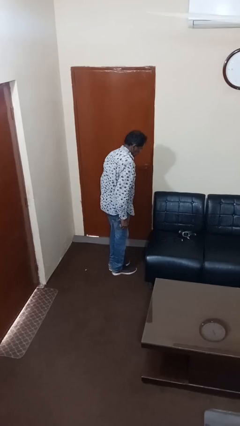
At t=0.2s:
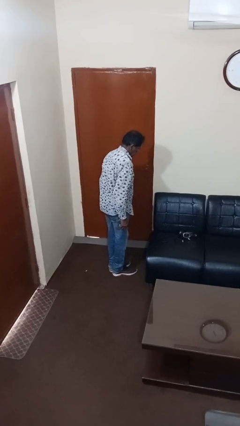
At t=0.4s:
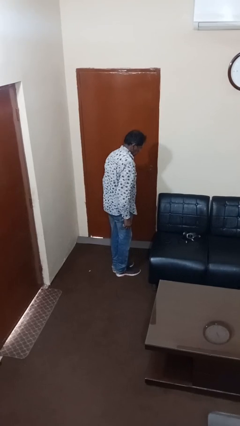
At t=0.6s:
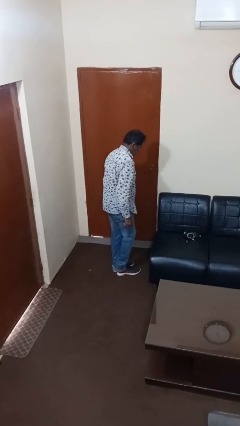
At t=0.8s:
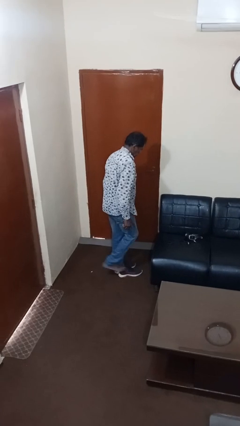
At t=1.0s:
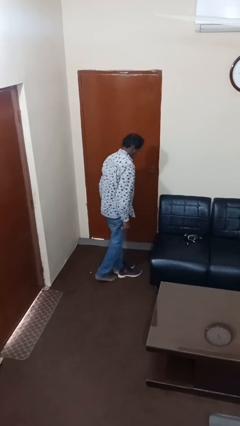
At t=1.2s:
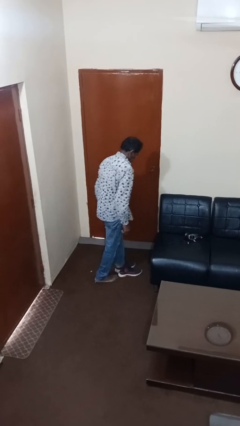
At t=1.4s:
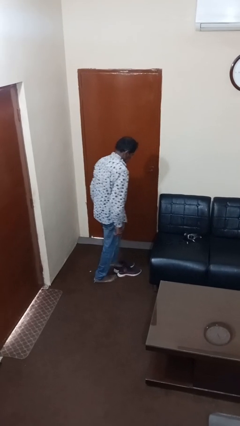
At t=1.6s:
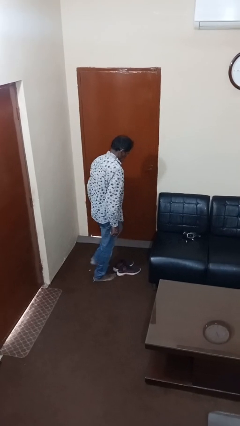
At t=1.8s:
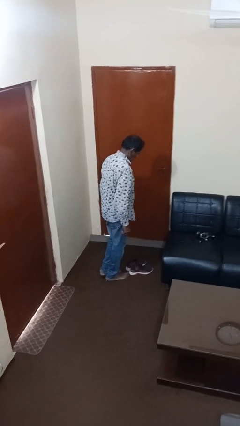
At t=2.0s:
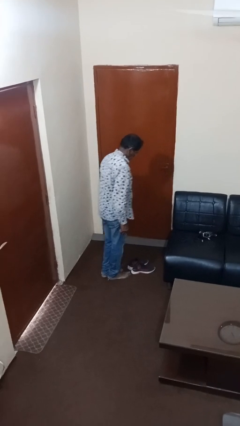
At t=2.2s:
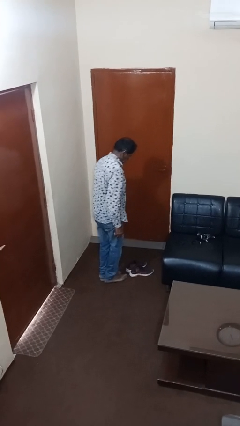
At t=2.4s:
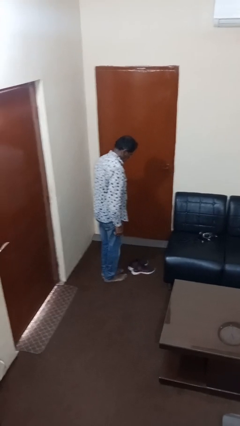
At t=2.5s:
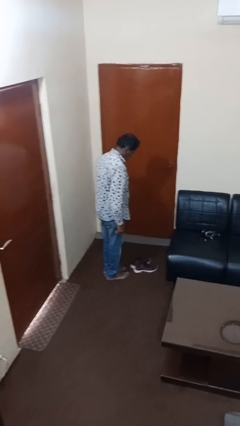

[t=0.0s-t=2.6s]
person takes off shoes

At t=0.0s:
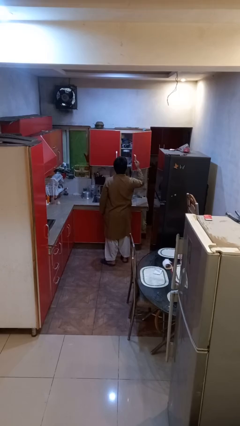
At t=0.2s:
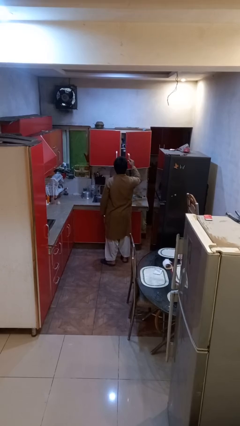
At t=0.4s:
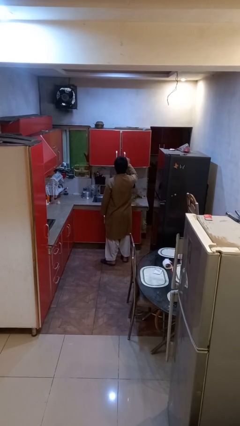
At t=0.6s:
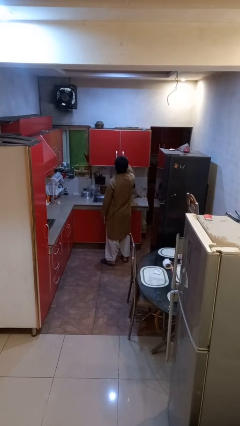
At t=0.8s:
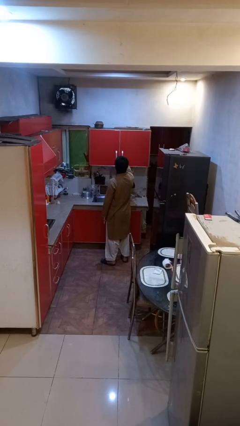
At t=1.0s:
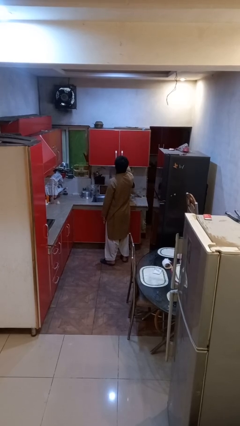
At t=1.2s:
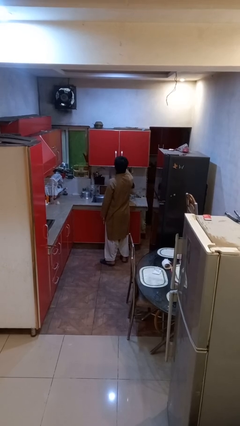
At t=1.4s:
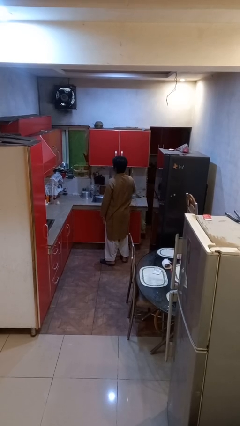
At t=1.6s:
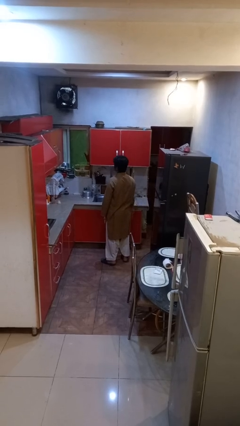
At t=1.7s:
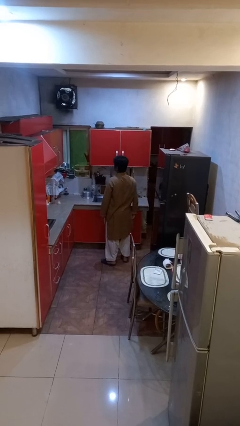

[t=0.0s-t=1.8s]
person closes cabinet

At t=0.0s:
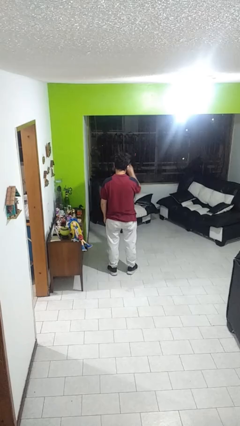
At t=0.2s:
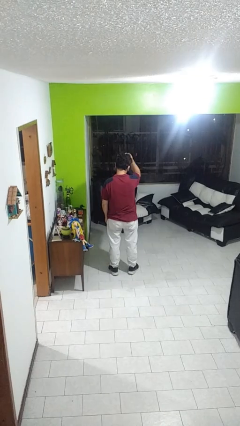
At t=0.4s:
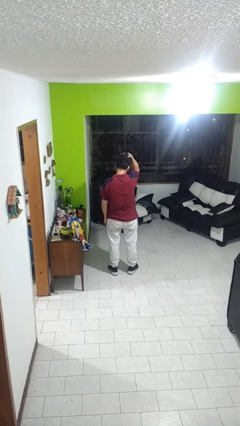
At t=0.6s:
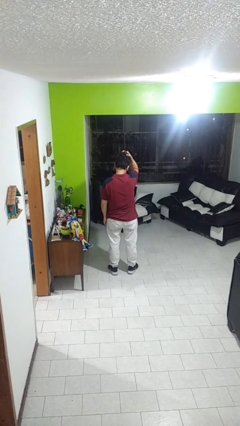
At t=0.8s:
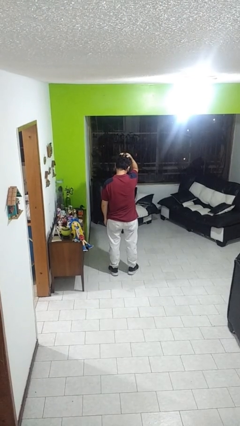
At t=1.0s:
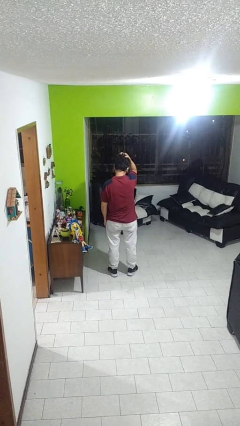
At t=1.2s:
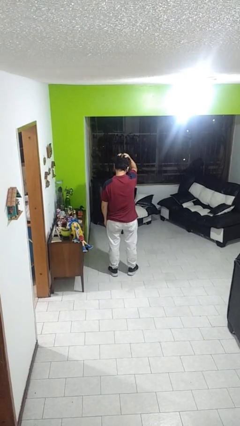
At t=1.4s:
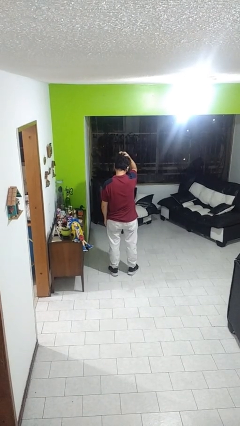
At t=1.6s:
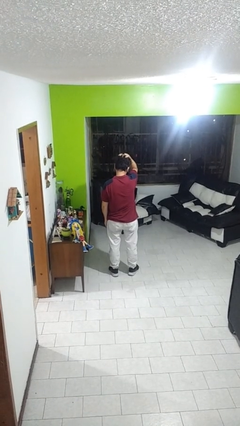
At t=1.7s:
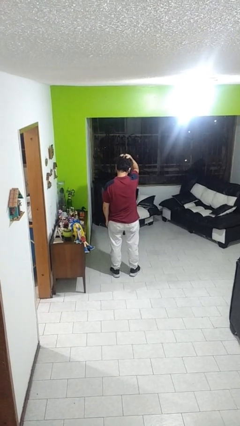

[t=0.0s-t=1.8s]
person scratches face

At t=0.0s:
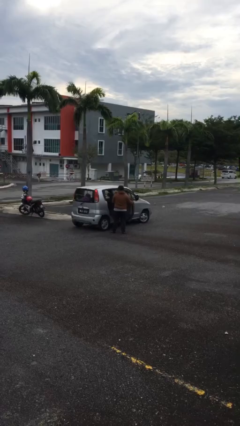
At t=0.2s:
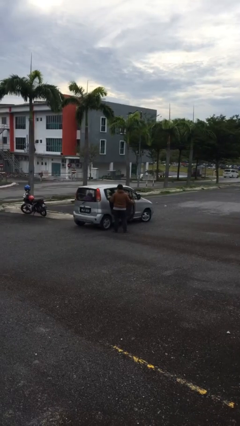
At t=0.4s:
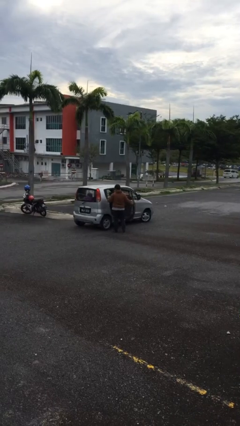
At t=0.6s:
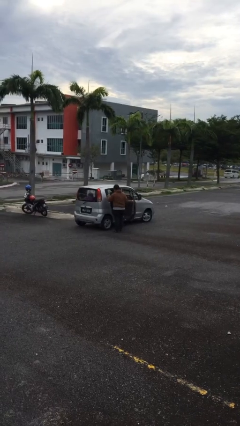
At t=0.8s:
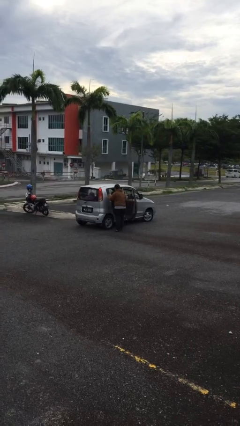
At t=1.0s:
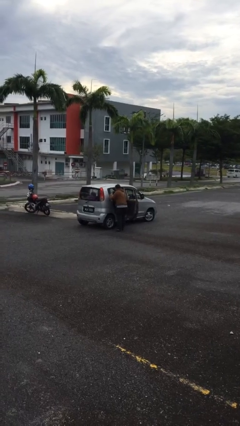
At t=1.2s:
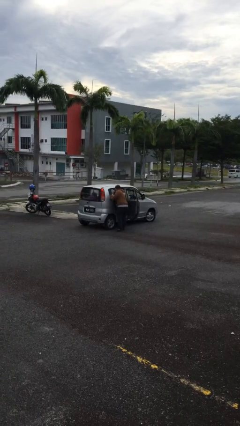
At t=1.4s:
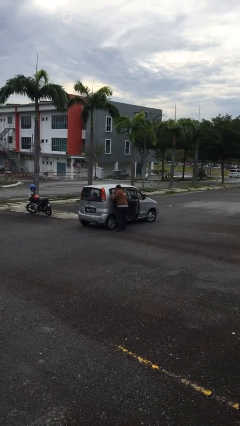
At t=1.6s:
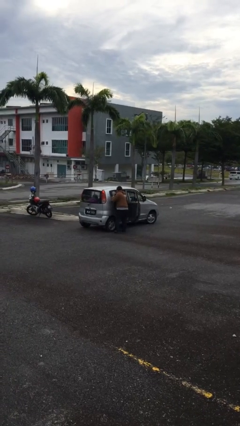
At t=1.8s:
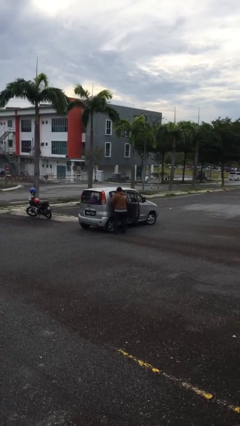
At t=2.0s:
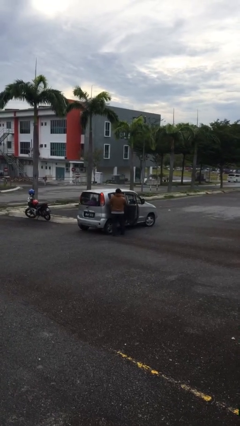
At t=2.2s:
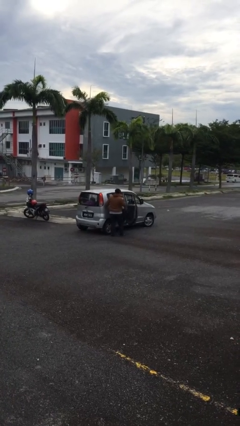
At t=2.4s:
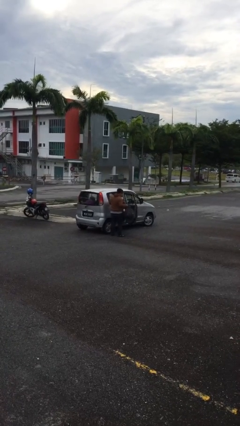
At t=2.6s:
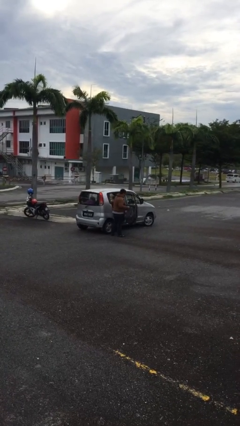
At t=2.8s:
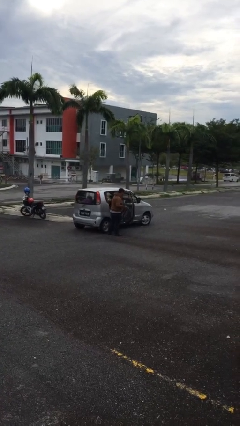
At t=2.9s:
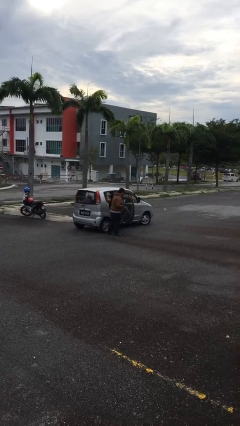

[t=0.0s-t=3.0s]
person unloads car

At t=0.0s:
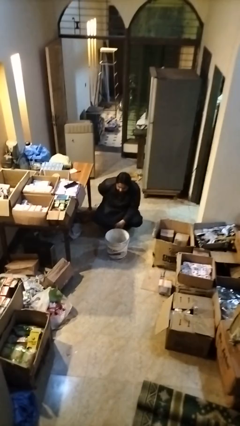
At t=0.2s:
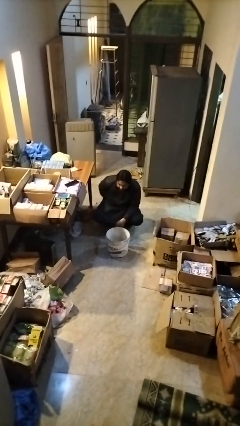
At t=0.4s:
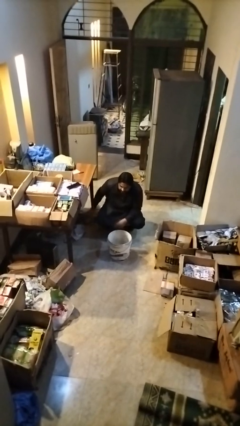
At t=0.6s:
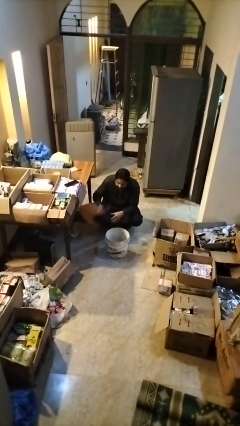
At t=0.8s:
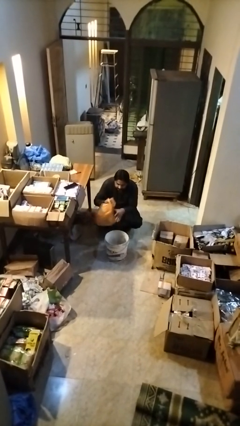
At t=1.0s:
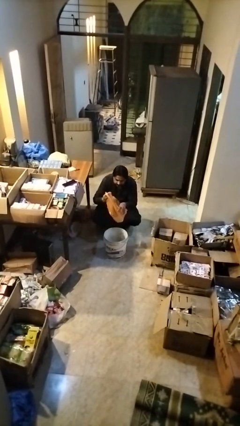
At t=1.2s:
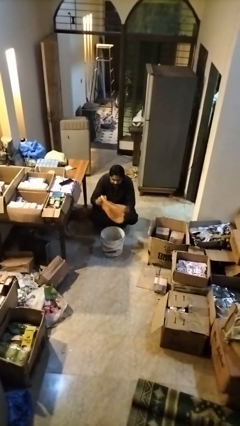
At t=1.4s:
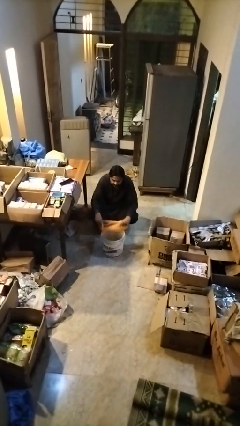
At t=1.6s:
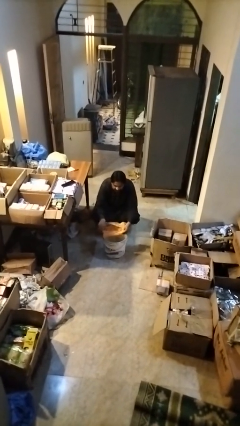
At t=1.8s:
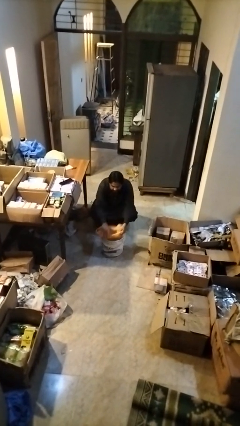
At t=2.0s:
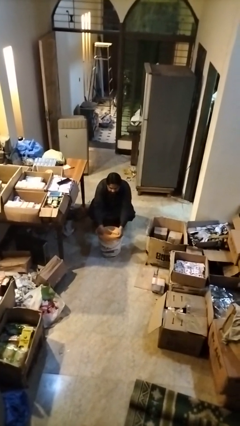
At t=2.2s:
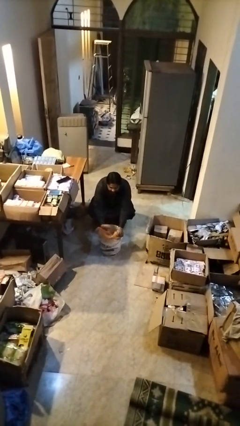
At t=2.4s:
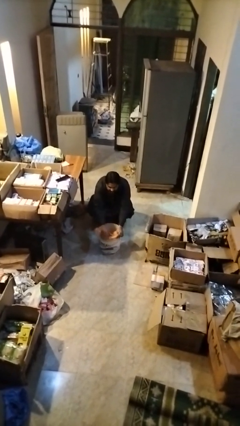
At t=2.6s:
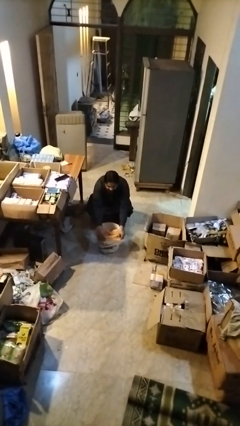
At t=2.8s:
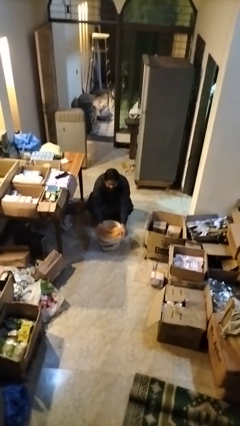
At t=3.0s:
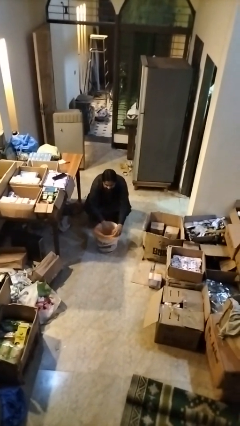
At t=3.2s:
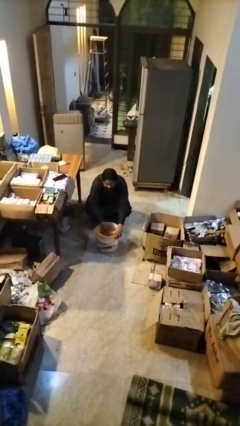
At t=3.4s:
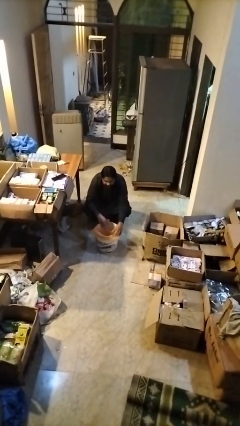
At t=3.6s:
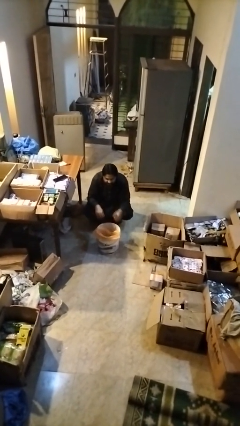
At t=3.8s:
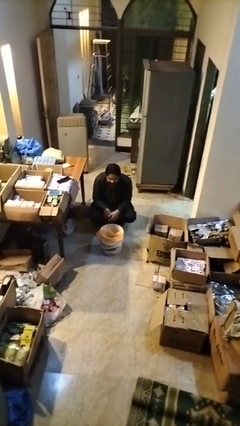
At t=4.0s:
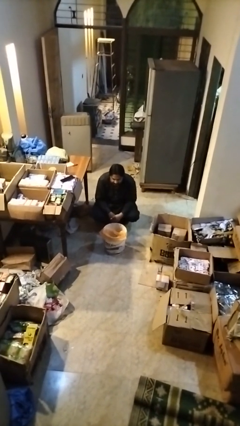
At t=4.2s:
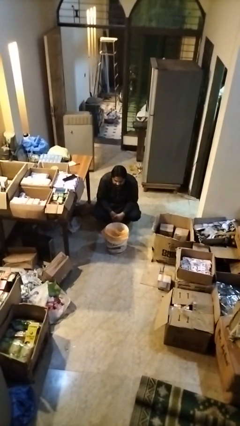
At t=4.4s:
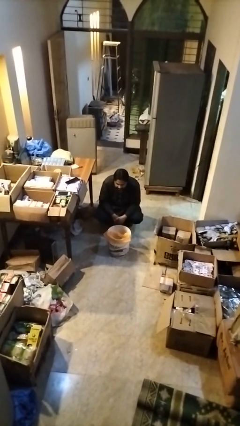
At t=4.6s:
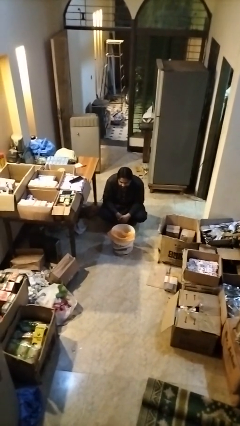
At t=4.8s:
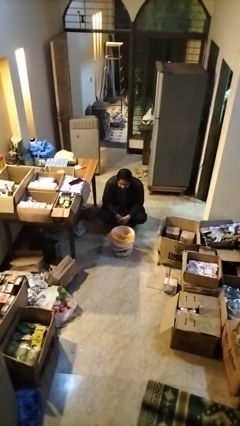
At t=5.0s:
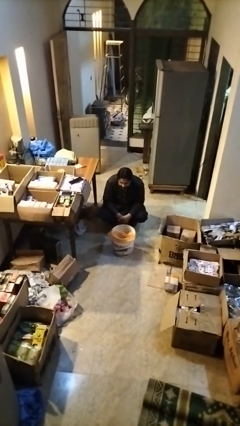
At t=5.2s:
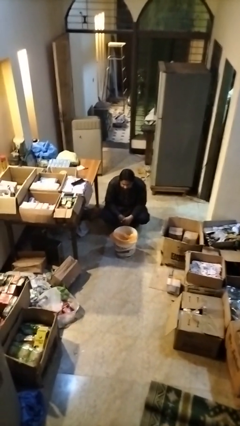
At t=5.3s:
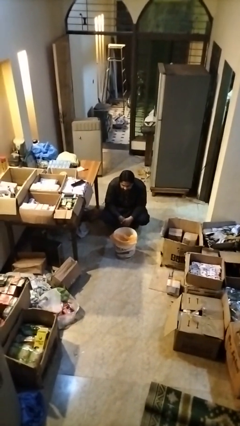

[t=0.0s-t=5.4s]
person inserts trashbag into trashcan

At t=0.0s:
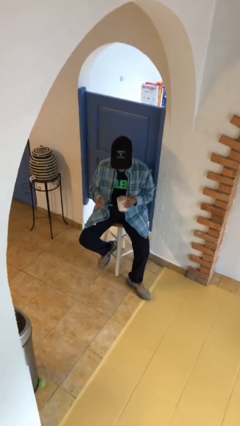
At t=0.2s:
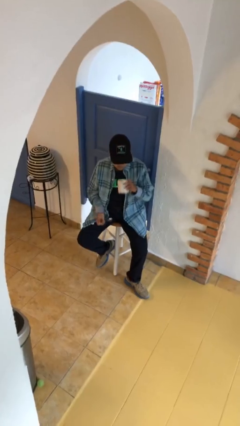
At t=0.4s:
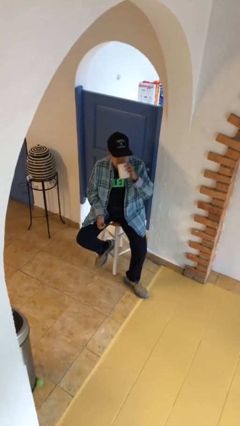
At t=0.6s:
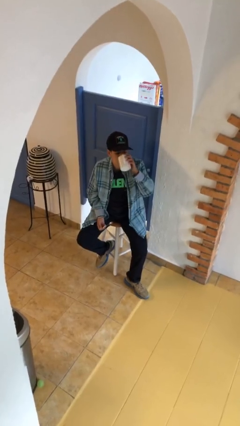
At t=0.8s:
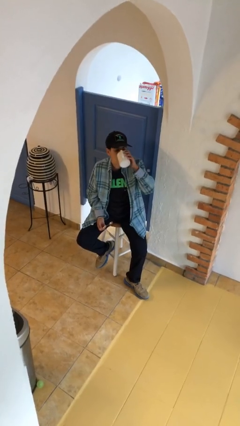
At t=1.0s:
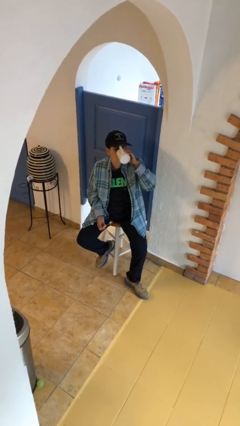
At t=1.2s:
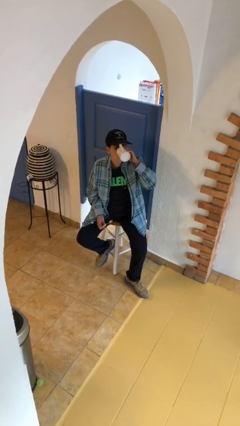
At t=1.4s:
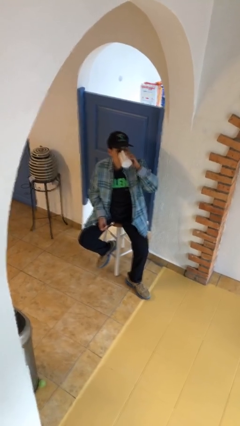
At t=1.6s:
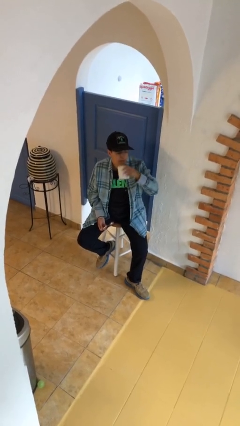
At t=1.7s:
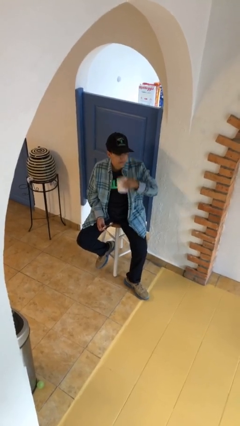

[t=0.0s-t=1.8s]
person drinks from mug

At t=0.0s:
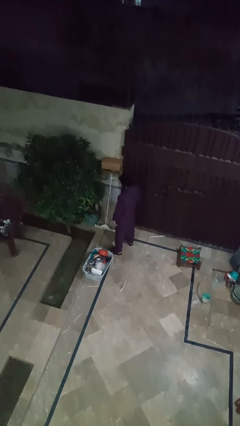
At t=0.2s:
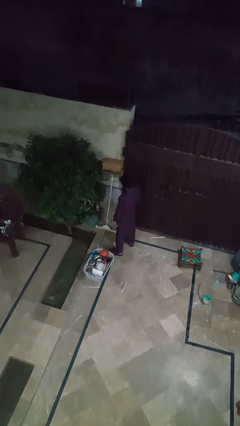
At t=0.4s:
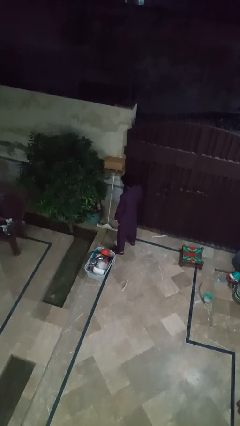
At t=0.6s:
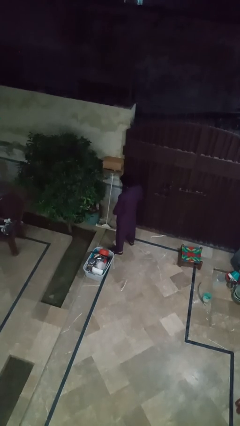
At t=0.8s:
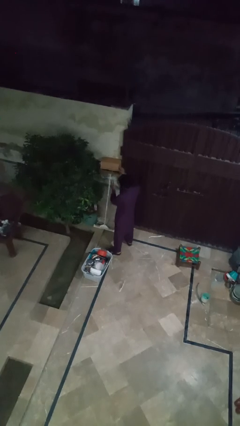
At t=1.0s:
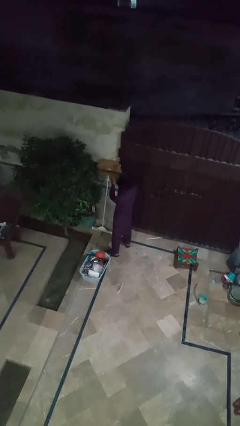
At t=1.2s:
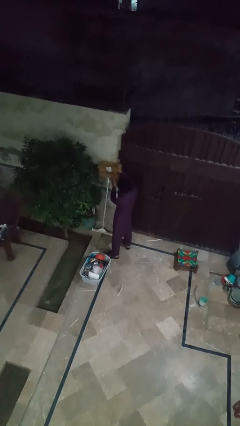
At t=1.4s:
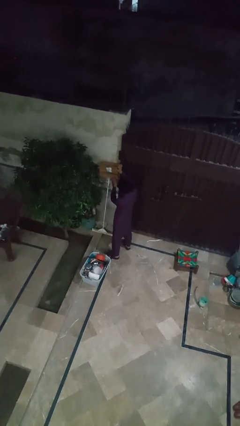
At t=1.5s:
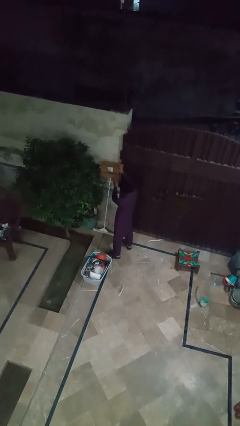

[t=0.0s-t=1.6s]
person opens mailbox
